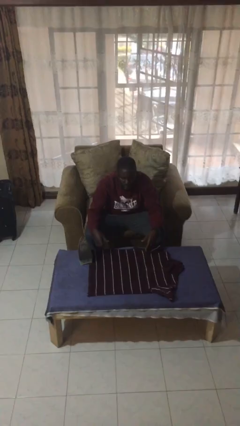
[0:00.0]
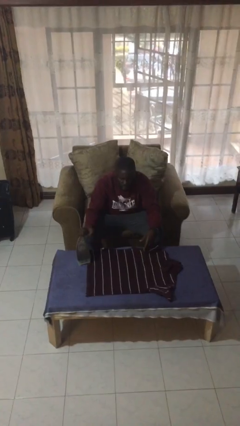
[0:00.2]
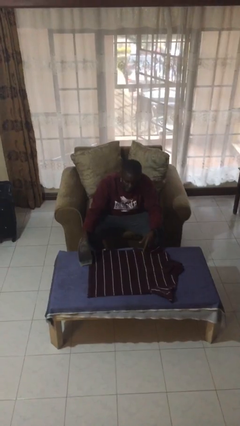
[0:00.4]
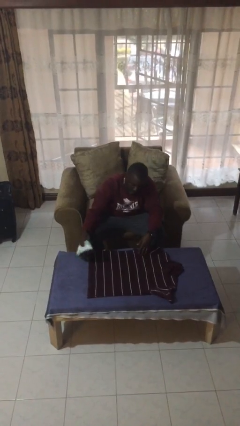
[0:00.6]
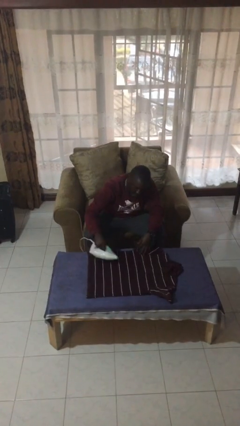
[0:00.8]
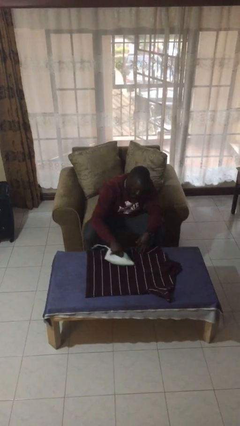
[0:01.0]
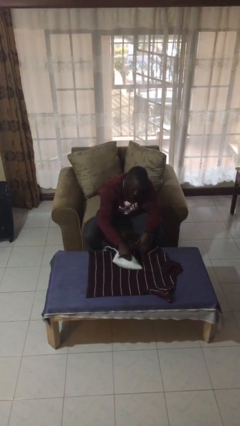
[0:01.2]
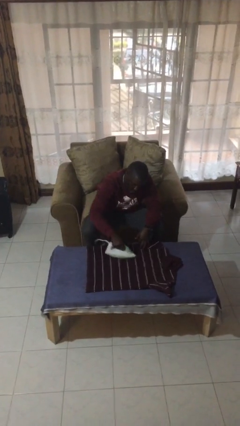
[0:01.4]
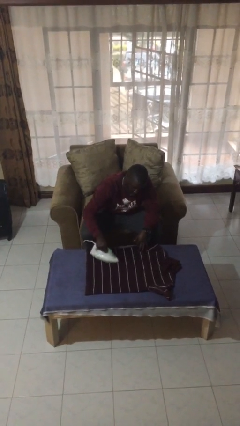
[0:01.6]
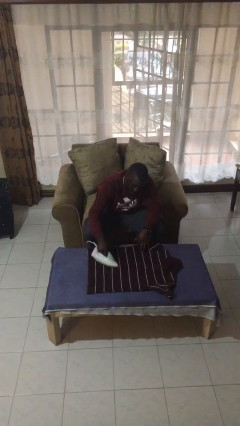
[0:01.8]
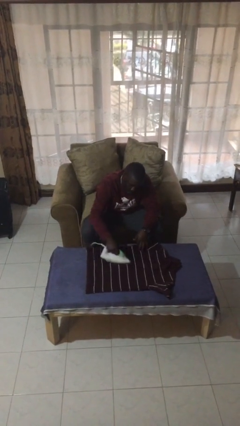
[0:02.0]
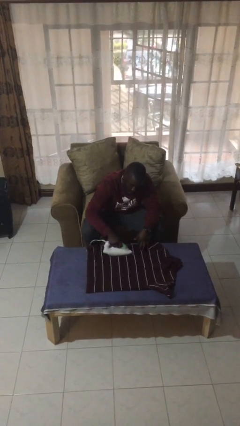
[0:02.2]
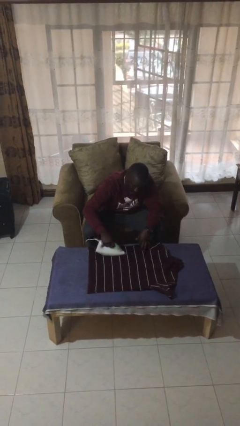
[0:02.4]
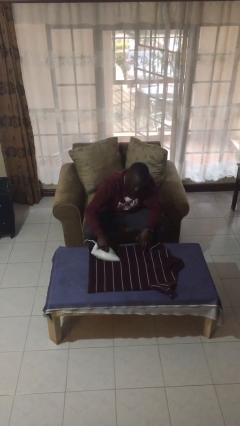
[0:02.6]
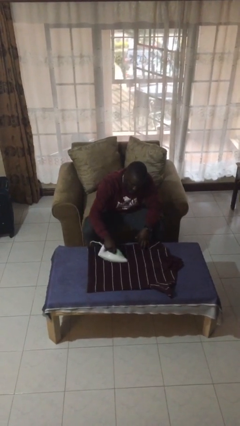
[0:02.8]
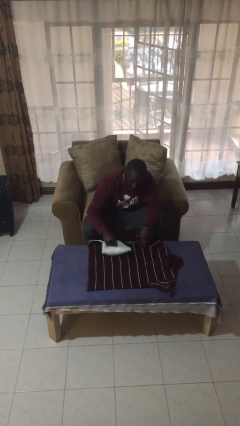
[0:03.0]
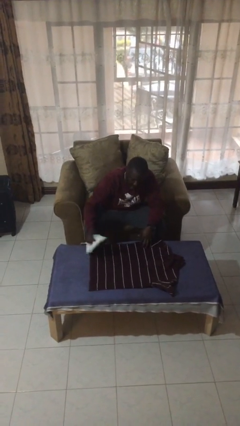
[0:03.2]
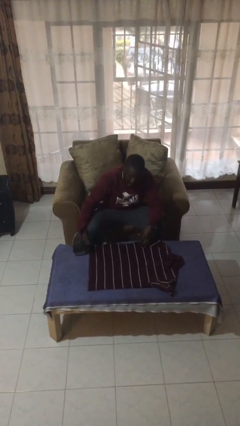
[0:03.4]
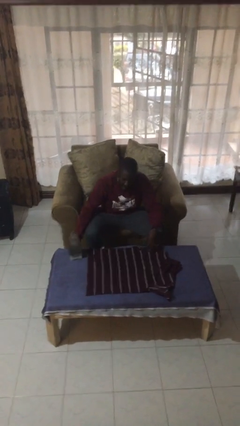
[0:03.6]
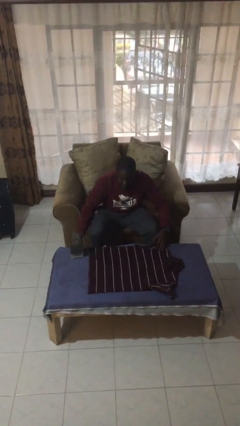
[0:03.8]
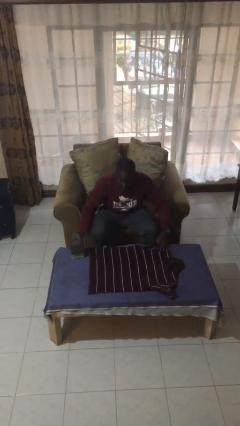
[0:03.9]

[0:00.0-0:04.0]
person irons clothes

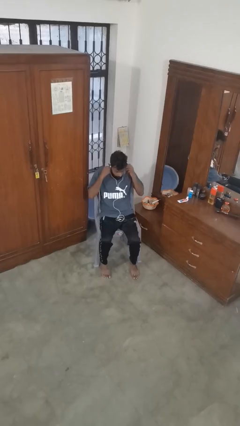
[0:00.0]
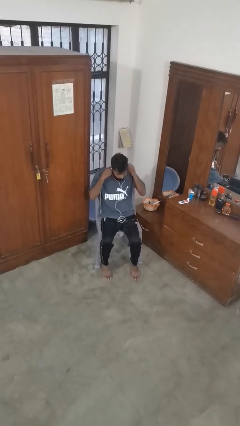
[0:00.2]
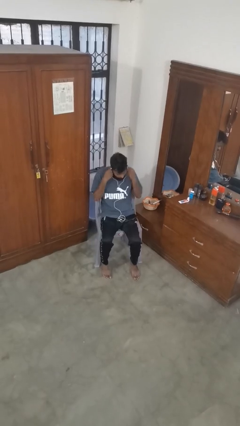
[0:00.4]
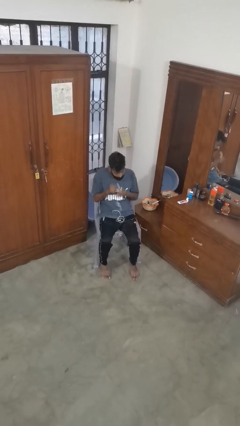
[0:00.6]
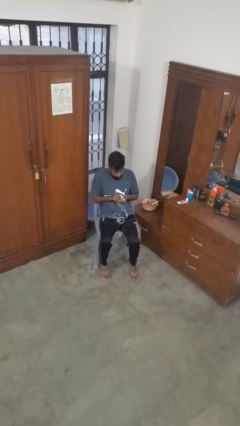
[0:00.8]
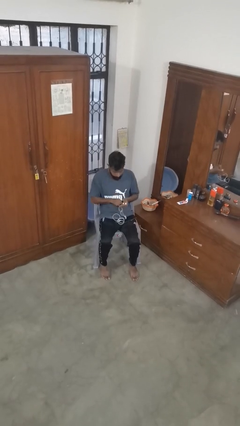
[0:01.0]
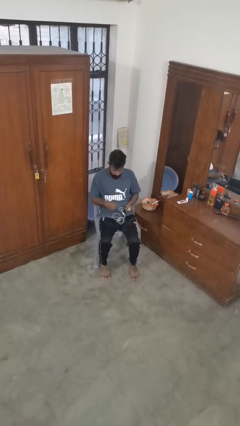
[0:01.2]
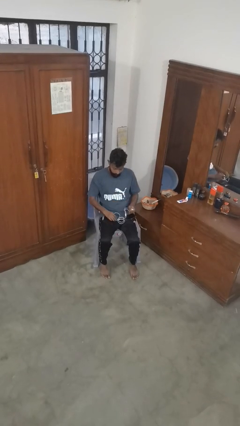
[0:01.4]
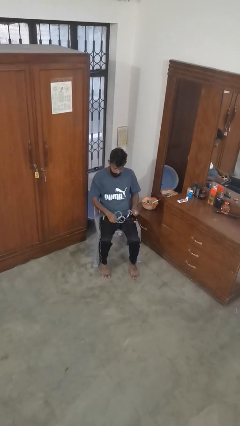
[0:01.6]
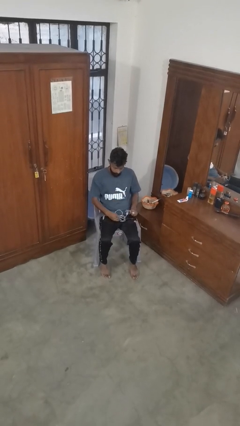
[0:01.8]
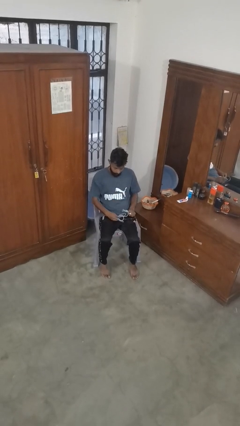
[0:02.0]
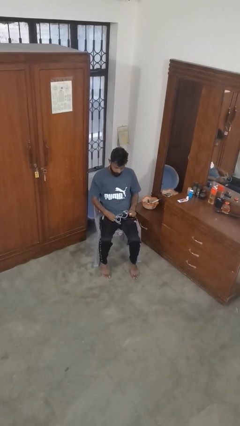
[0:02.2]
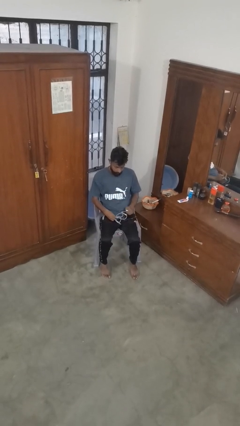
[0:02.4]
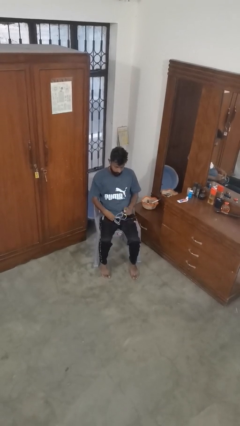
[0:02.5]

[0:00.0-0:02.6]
person takes off headphones

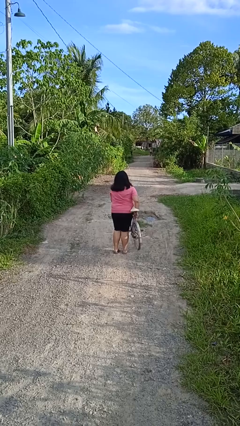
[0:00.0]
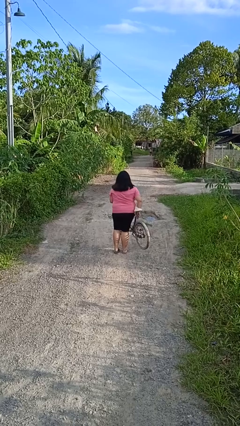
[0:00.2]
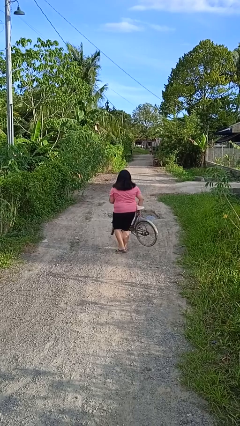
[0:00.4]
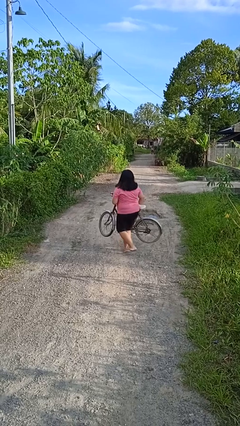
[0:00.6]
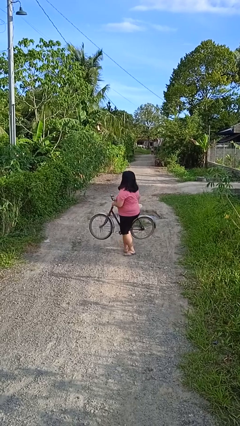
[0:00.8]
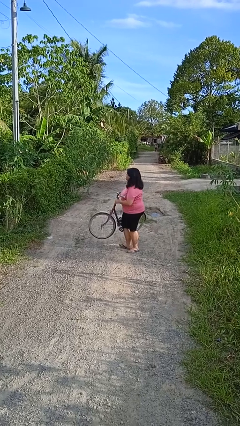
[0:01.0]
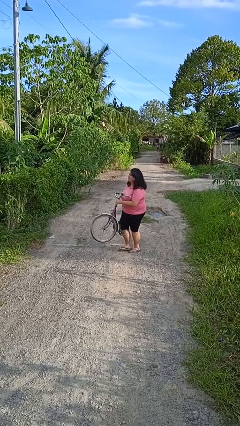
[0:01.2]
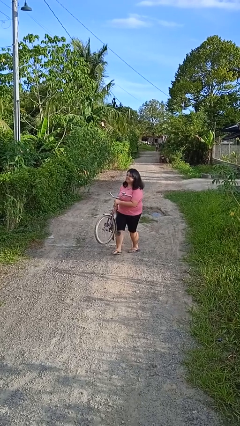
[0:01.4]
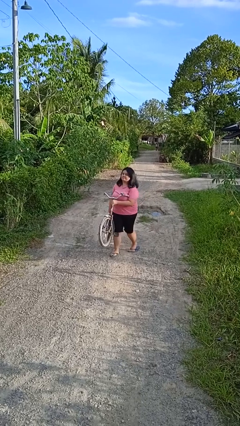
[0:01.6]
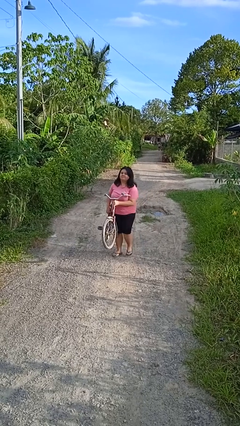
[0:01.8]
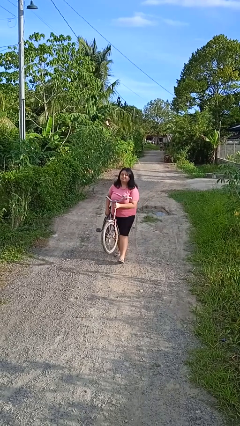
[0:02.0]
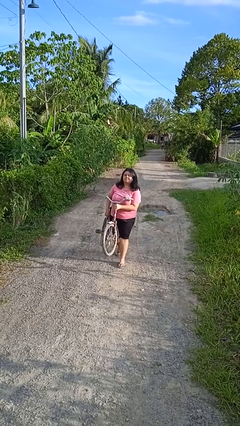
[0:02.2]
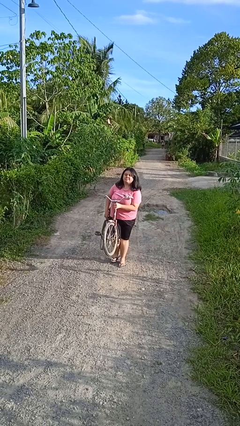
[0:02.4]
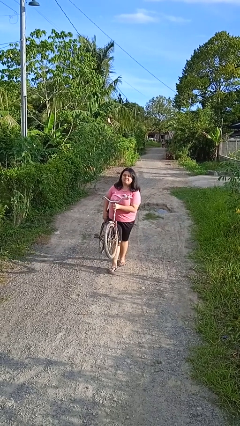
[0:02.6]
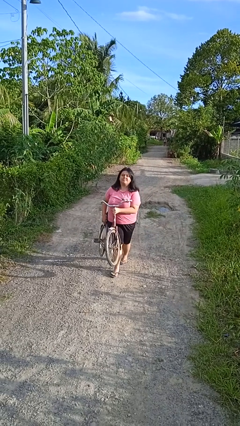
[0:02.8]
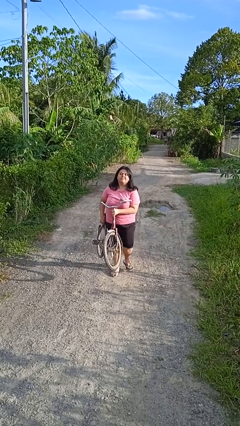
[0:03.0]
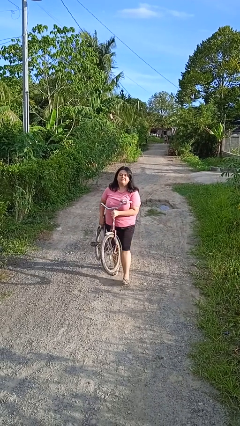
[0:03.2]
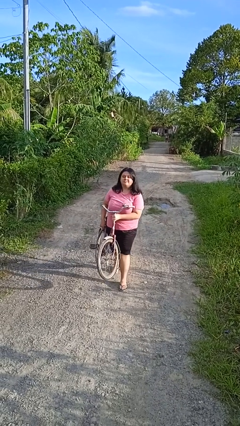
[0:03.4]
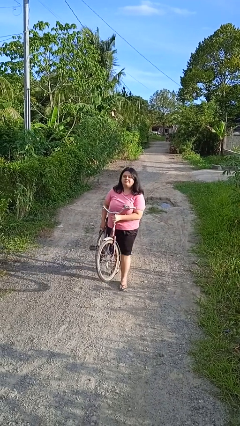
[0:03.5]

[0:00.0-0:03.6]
person carries bicycle

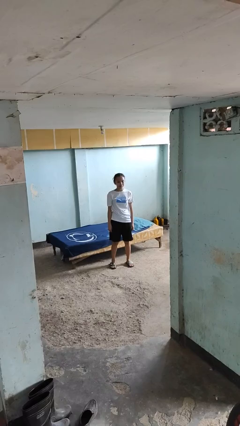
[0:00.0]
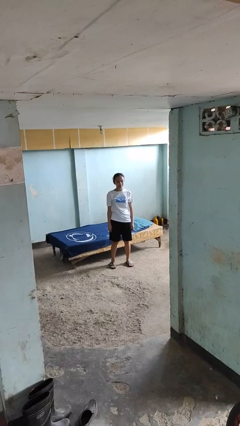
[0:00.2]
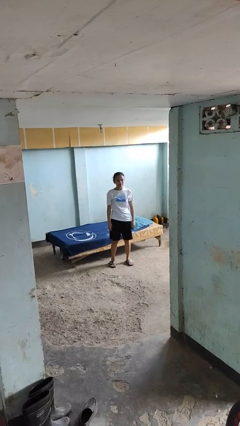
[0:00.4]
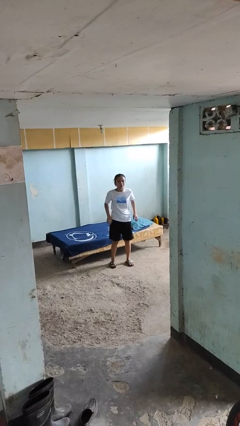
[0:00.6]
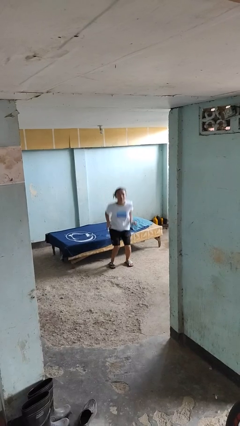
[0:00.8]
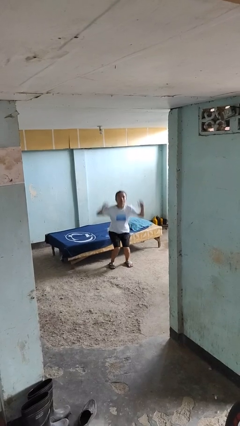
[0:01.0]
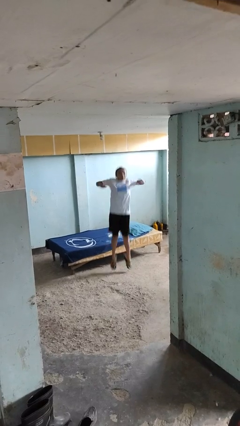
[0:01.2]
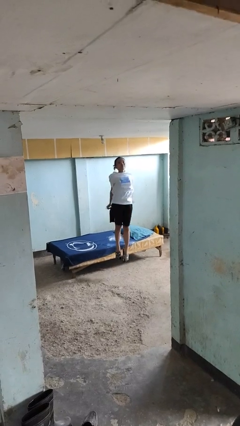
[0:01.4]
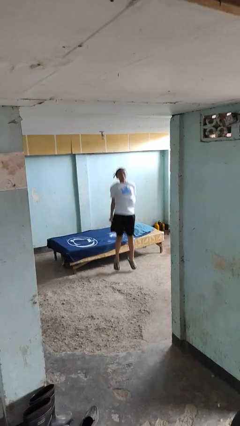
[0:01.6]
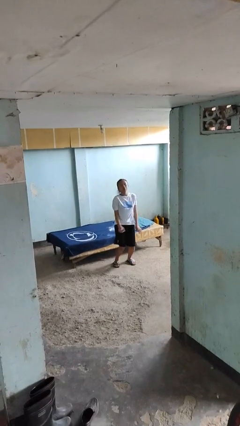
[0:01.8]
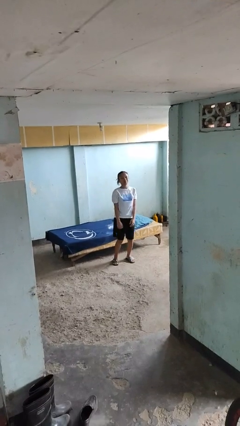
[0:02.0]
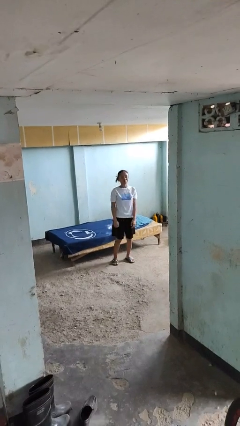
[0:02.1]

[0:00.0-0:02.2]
person jumps

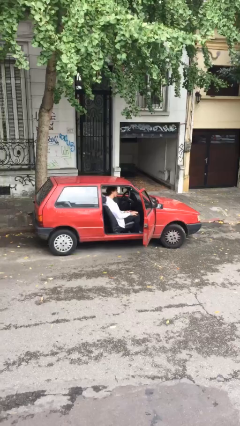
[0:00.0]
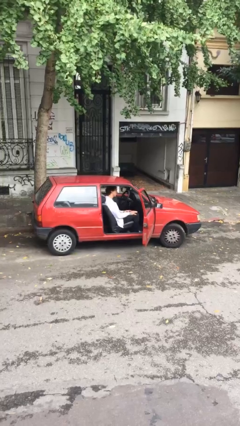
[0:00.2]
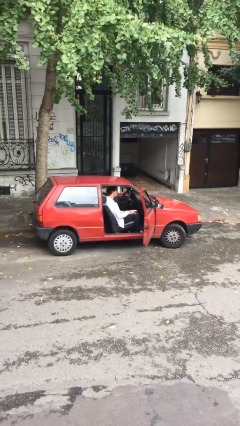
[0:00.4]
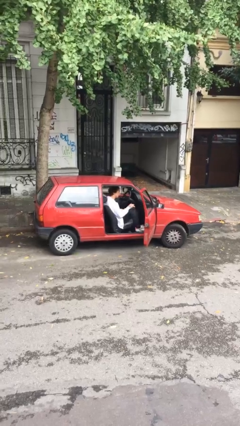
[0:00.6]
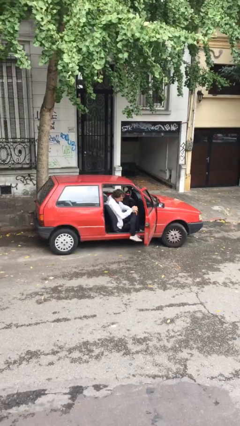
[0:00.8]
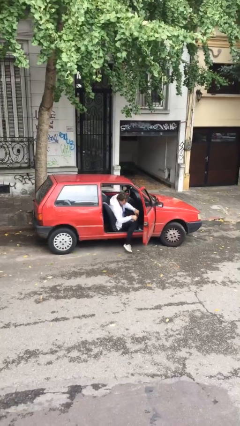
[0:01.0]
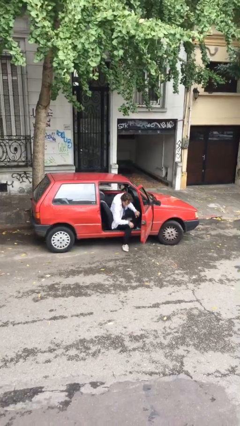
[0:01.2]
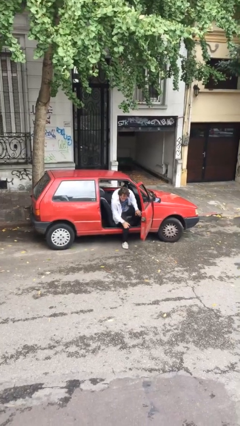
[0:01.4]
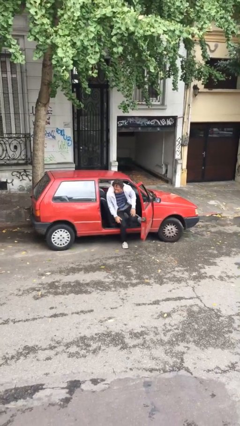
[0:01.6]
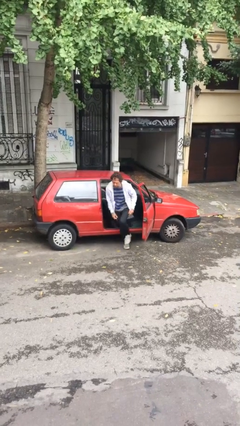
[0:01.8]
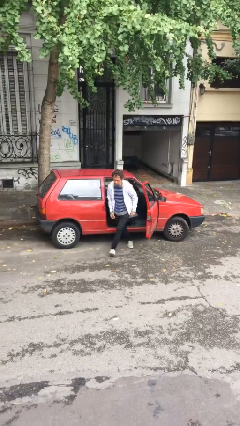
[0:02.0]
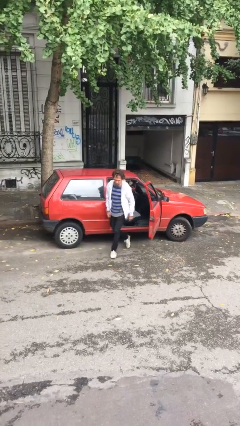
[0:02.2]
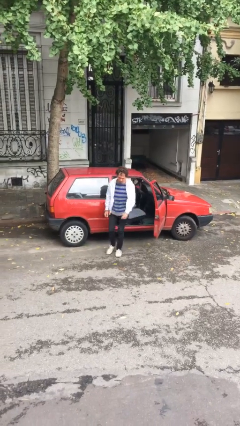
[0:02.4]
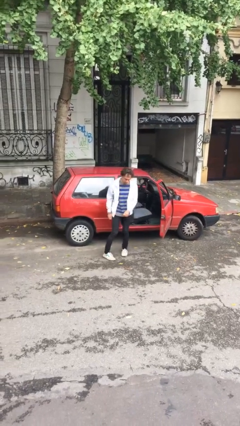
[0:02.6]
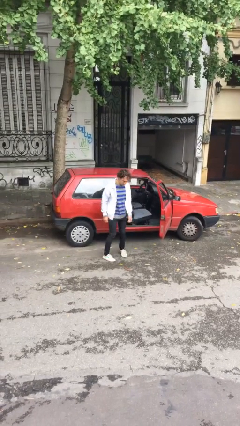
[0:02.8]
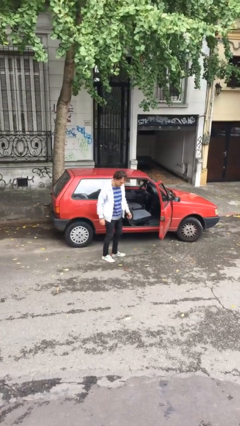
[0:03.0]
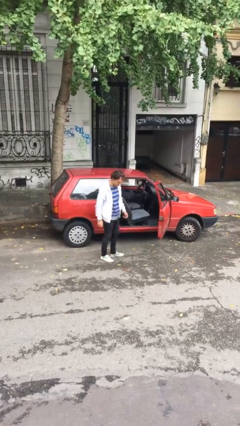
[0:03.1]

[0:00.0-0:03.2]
person exits car

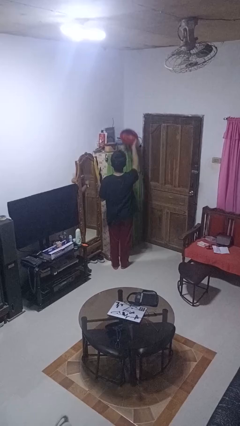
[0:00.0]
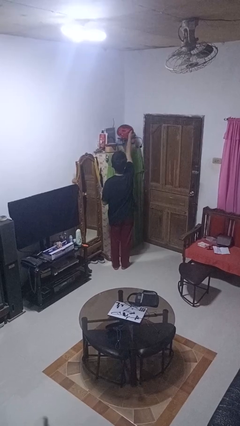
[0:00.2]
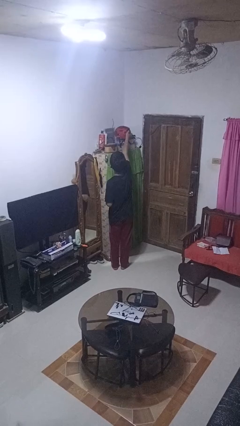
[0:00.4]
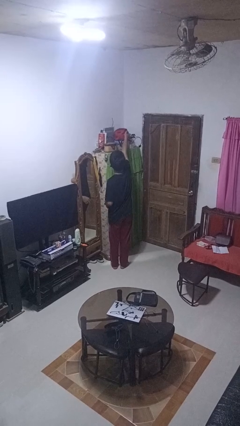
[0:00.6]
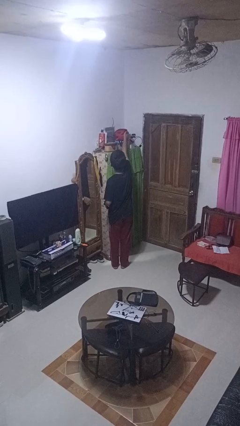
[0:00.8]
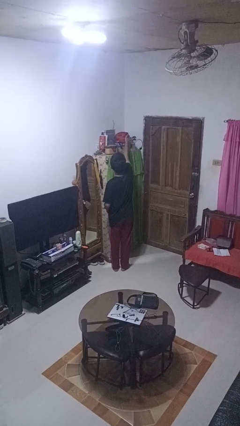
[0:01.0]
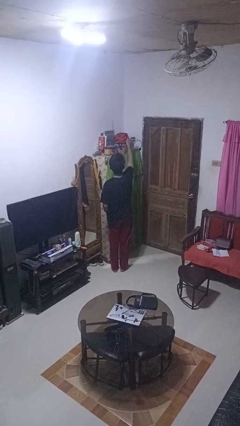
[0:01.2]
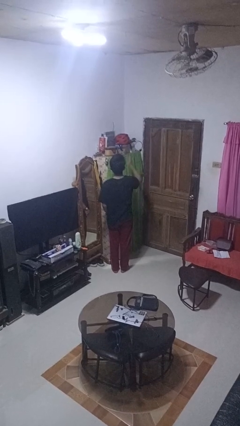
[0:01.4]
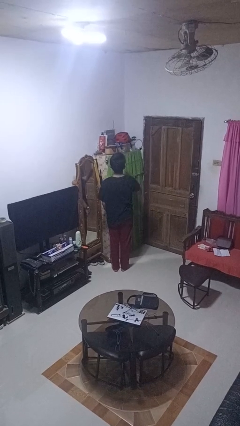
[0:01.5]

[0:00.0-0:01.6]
person puts down object on shelf

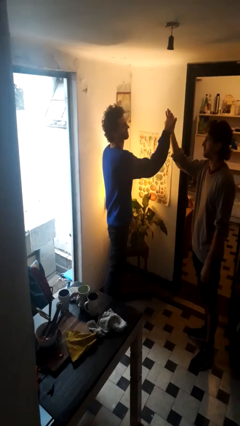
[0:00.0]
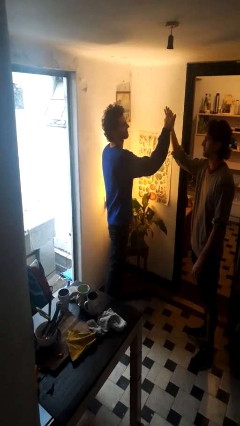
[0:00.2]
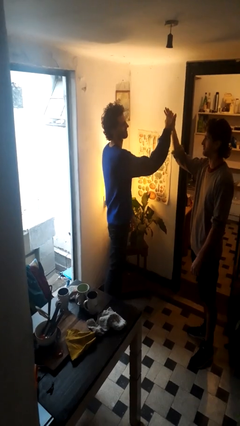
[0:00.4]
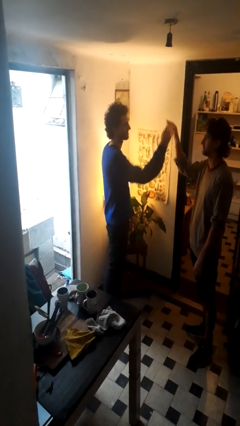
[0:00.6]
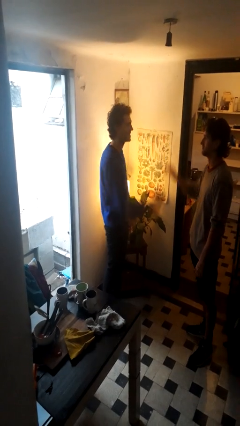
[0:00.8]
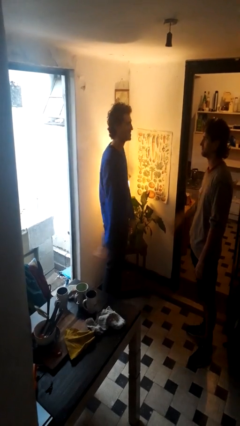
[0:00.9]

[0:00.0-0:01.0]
person highfives hand
